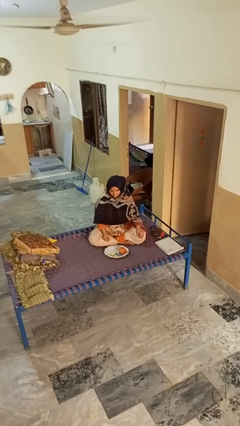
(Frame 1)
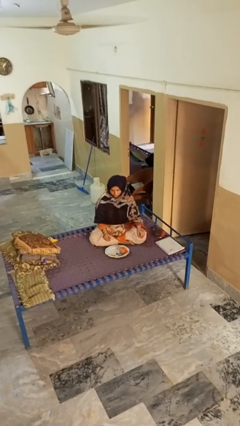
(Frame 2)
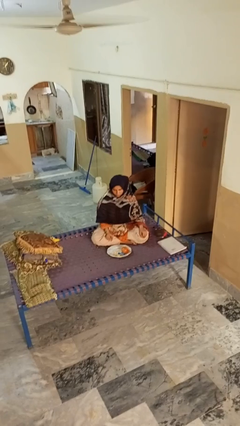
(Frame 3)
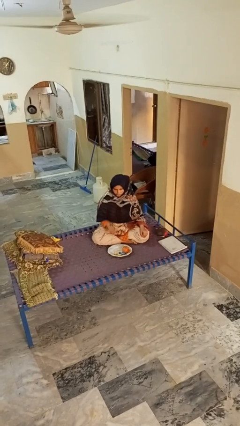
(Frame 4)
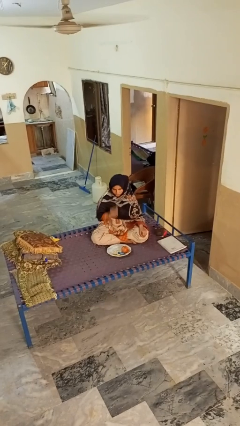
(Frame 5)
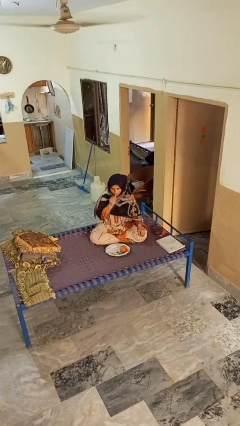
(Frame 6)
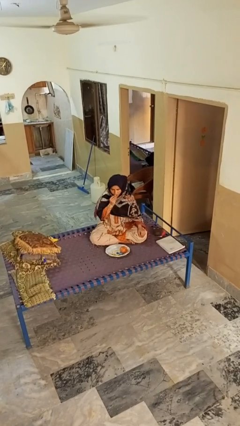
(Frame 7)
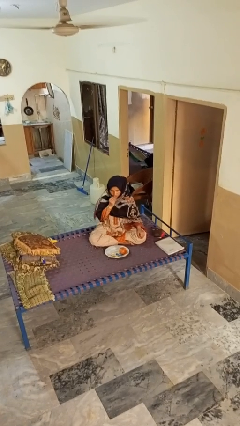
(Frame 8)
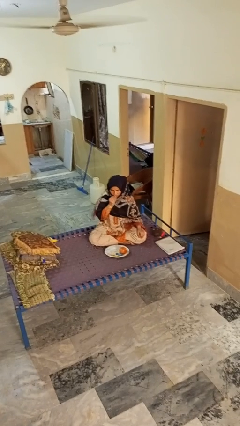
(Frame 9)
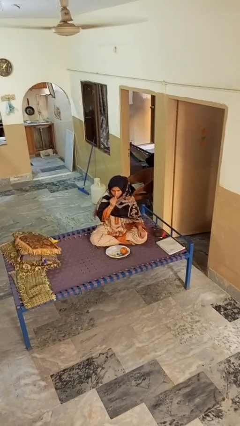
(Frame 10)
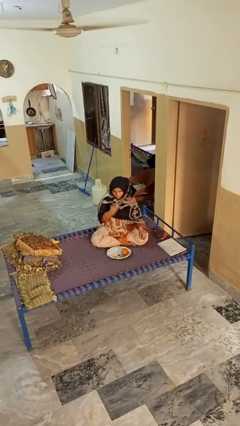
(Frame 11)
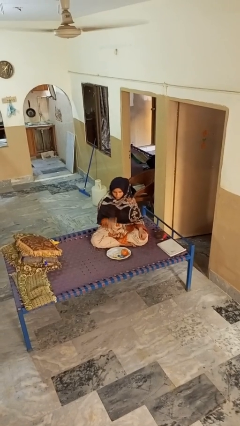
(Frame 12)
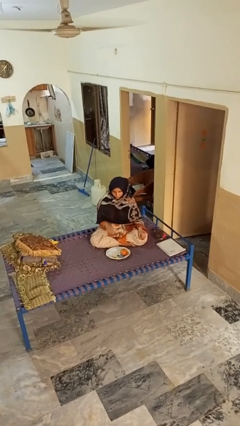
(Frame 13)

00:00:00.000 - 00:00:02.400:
person eats apple

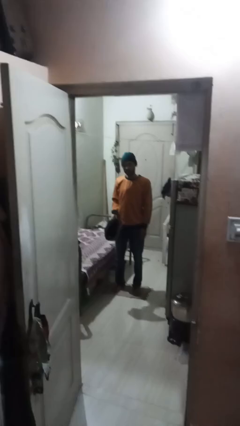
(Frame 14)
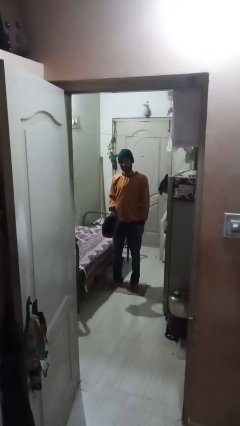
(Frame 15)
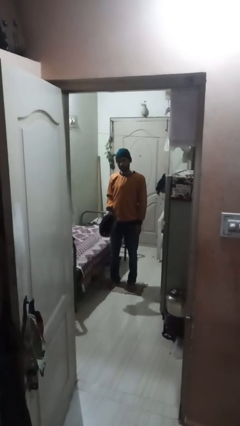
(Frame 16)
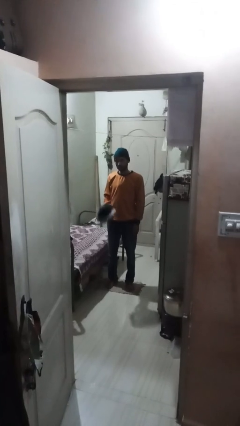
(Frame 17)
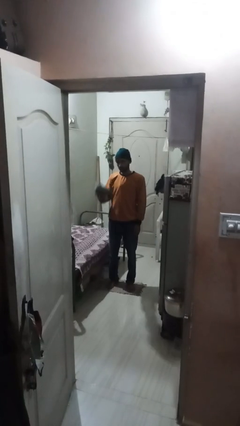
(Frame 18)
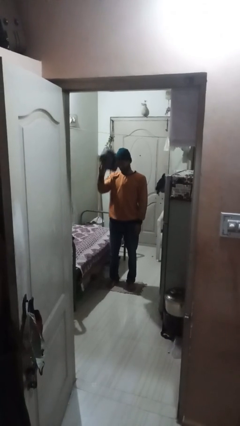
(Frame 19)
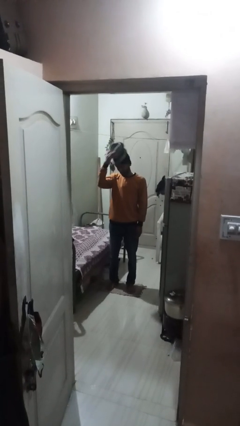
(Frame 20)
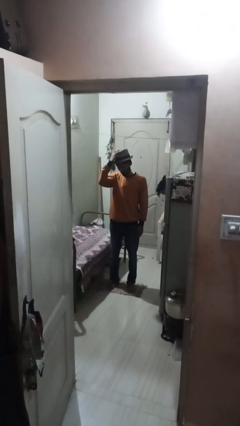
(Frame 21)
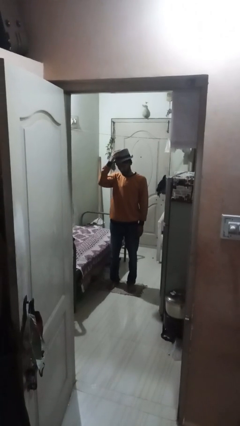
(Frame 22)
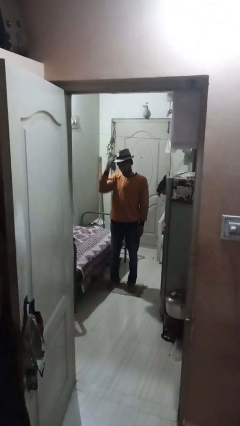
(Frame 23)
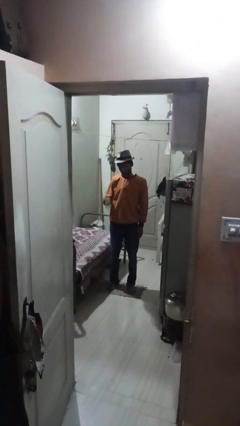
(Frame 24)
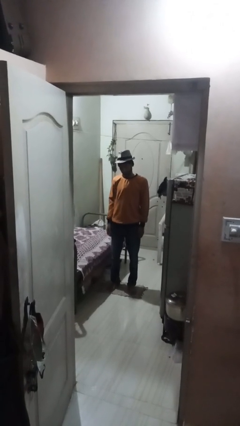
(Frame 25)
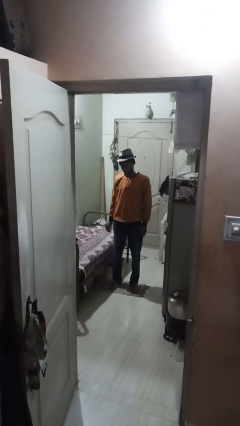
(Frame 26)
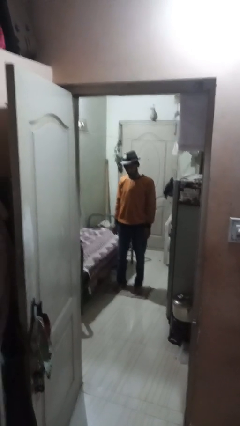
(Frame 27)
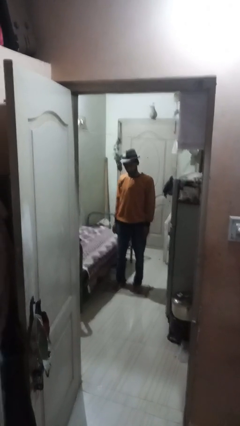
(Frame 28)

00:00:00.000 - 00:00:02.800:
person puts on hat

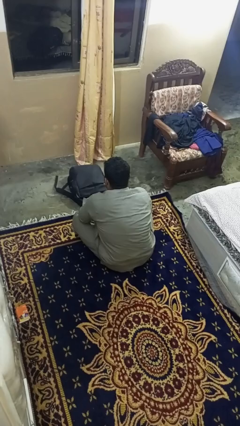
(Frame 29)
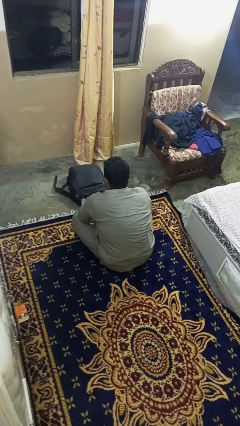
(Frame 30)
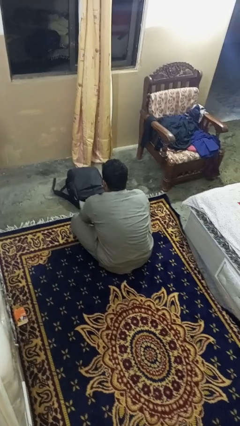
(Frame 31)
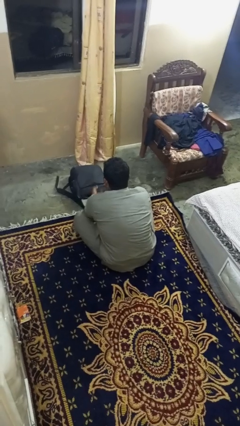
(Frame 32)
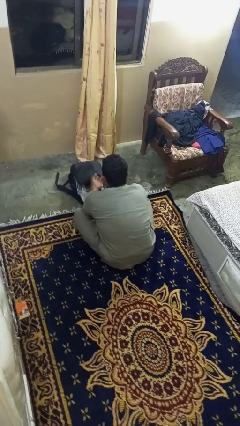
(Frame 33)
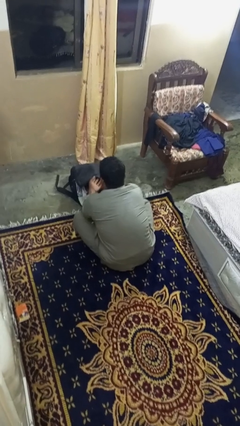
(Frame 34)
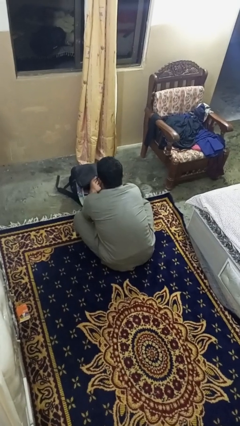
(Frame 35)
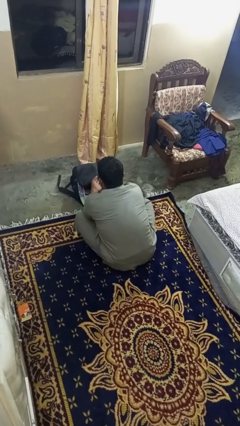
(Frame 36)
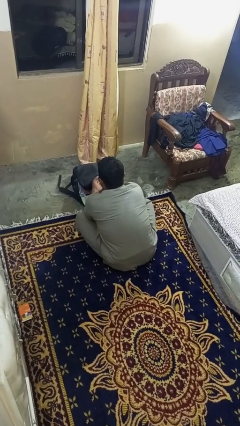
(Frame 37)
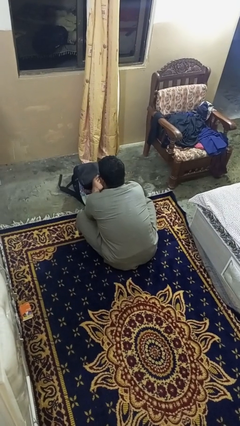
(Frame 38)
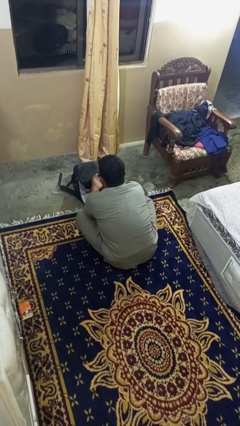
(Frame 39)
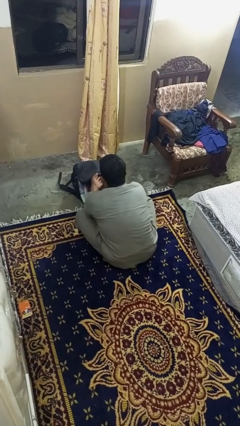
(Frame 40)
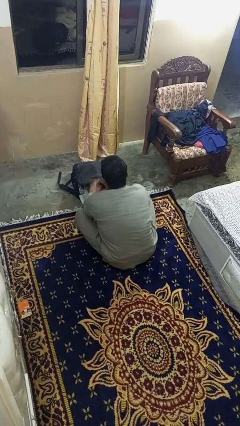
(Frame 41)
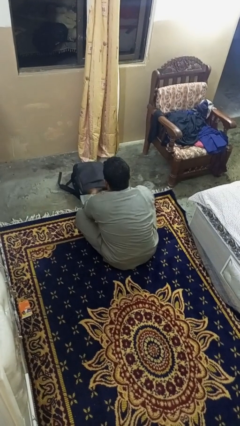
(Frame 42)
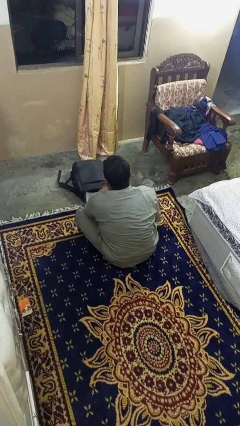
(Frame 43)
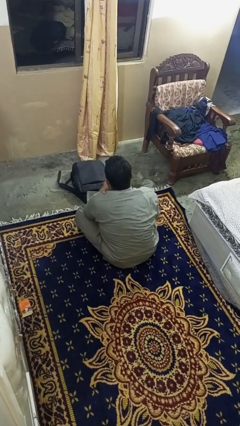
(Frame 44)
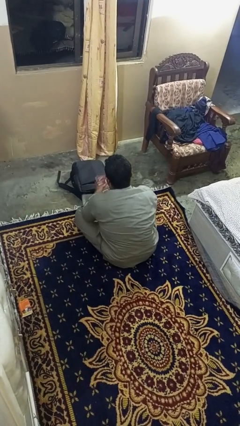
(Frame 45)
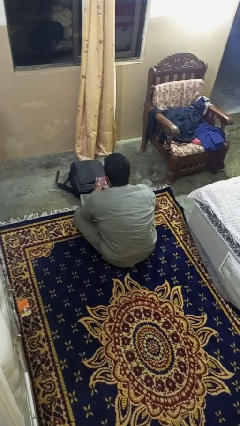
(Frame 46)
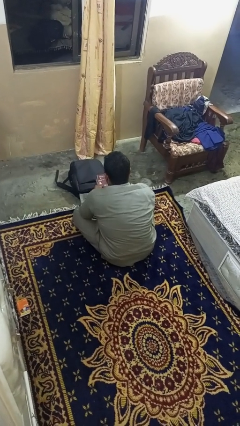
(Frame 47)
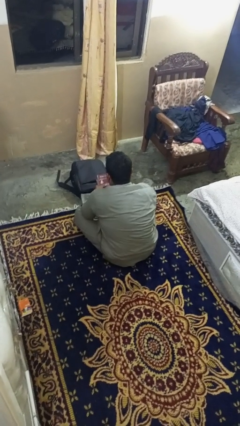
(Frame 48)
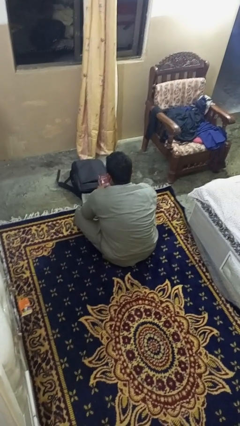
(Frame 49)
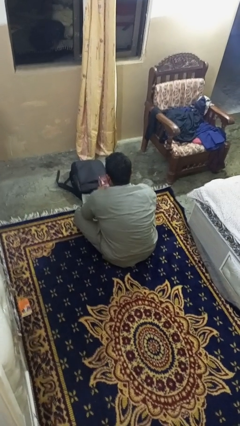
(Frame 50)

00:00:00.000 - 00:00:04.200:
person takes object from bag

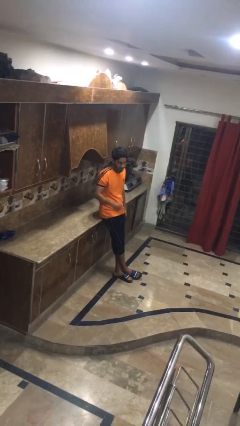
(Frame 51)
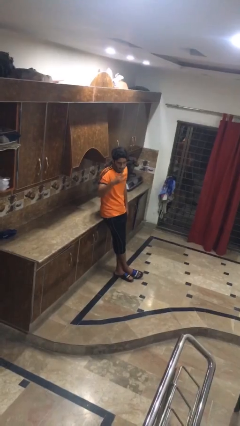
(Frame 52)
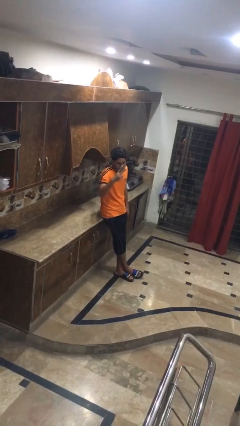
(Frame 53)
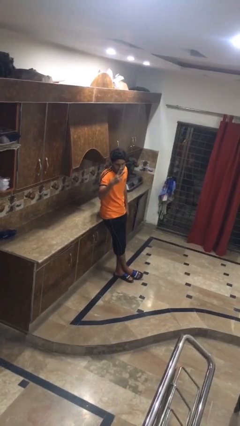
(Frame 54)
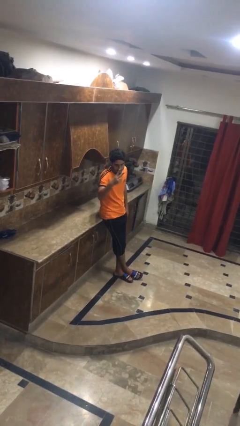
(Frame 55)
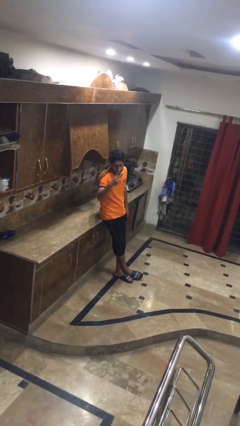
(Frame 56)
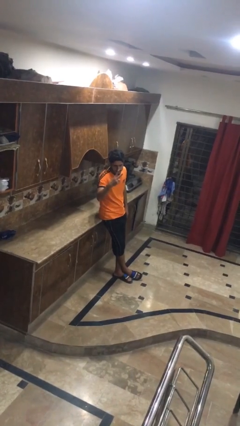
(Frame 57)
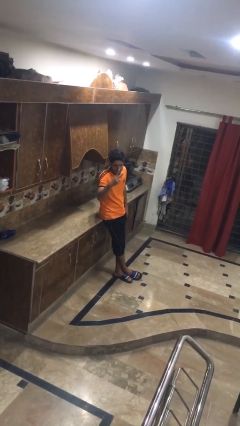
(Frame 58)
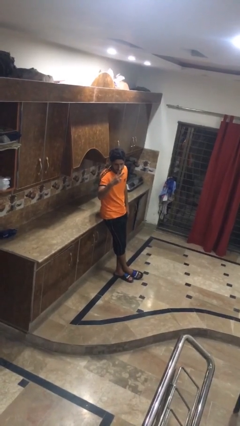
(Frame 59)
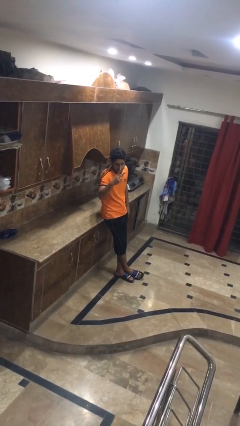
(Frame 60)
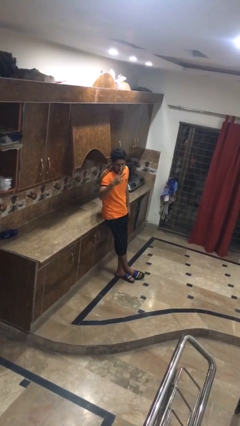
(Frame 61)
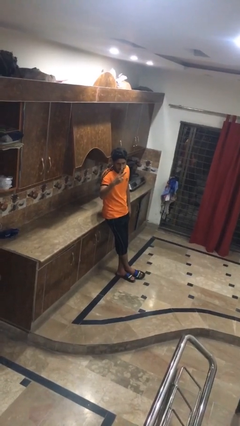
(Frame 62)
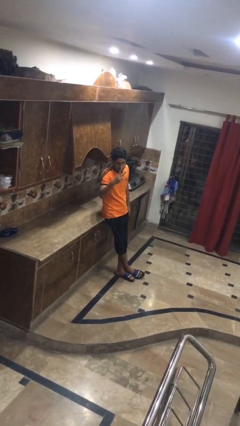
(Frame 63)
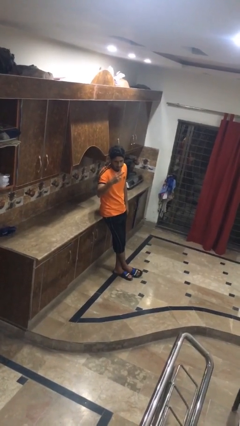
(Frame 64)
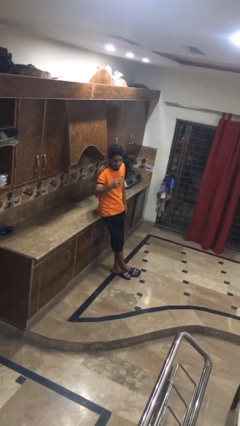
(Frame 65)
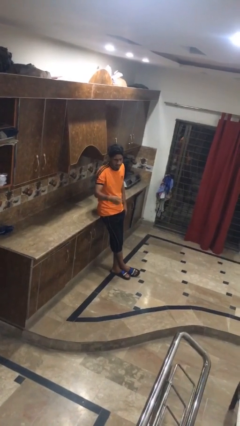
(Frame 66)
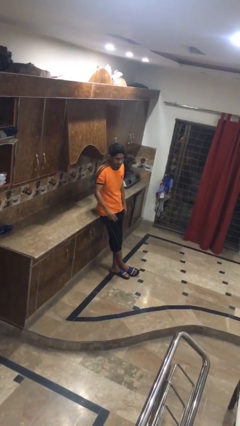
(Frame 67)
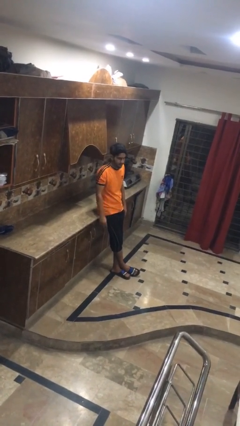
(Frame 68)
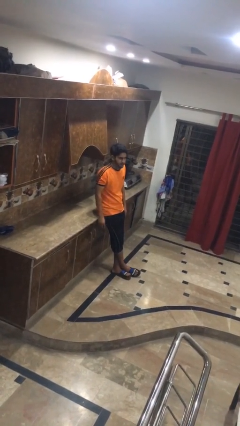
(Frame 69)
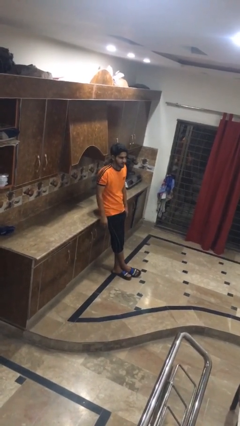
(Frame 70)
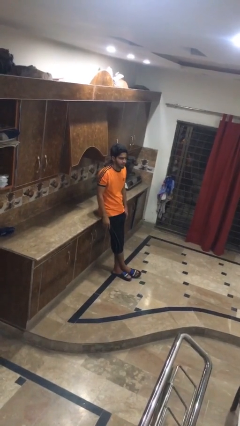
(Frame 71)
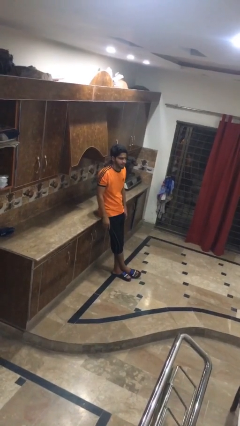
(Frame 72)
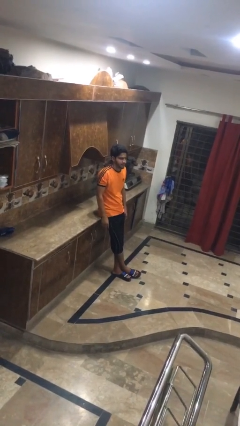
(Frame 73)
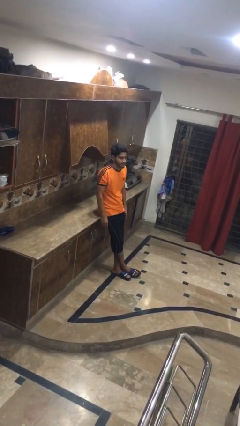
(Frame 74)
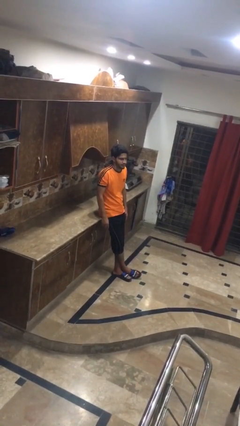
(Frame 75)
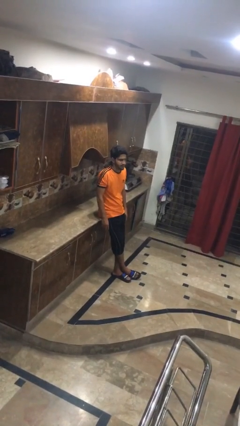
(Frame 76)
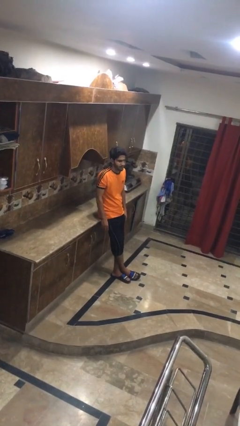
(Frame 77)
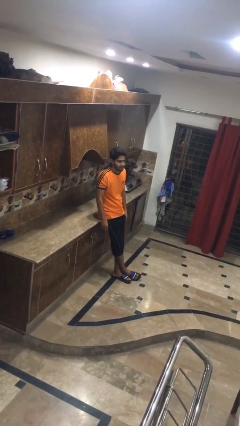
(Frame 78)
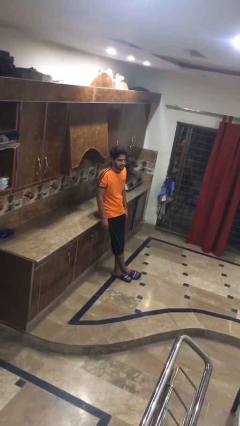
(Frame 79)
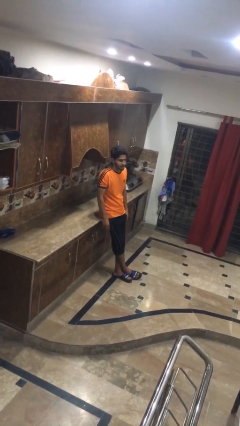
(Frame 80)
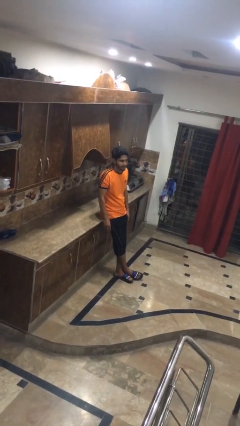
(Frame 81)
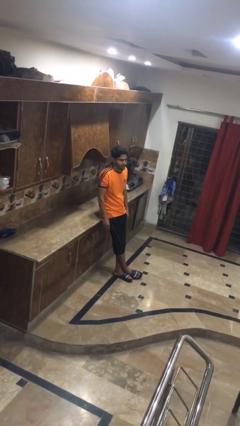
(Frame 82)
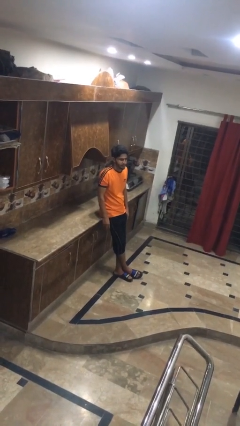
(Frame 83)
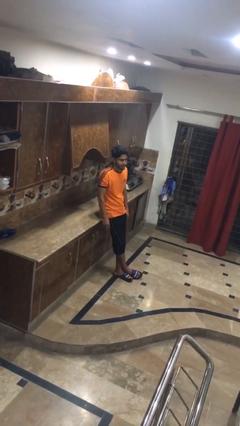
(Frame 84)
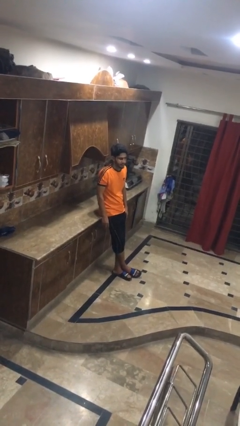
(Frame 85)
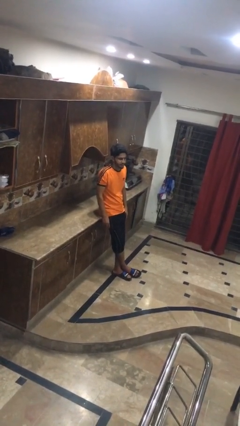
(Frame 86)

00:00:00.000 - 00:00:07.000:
person gestures peace

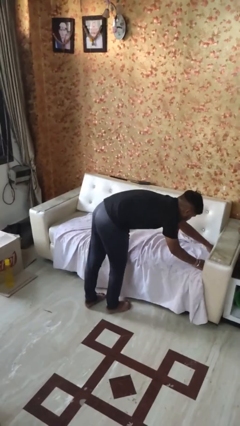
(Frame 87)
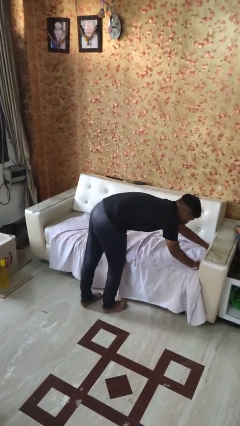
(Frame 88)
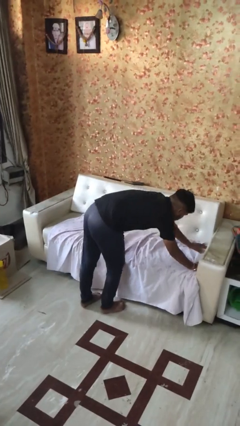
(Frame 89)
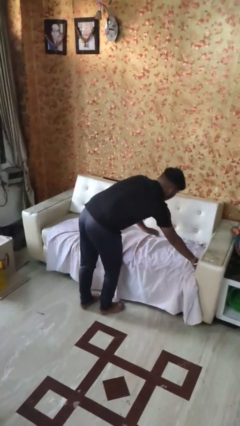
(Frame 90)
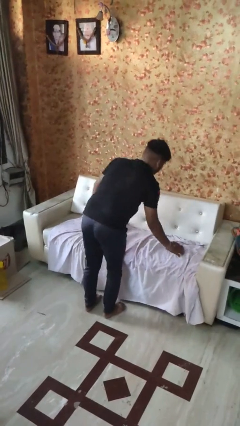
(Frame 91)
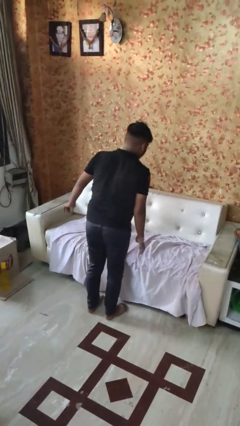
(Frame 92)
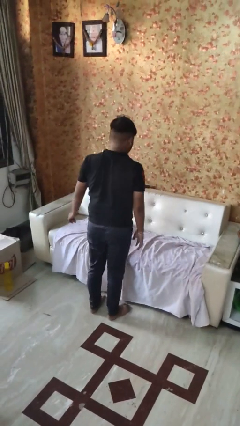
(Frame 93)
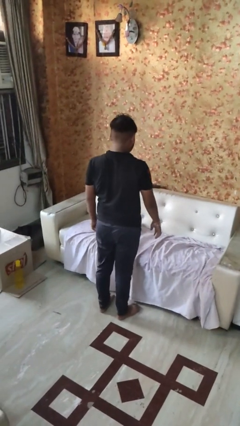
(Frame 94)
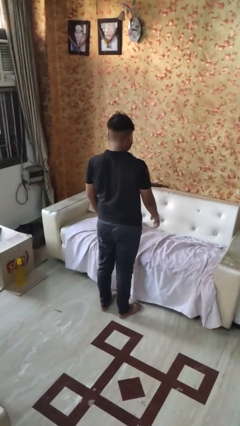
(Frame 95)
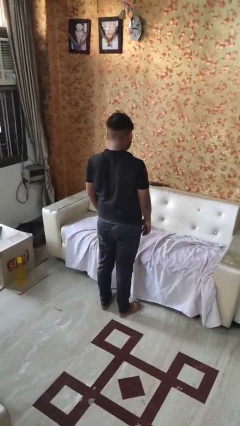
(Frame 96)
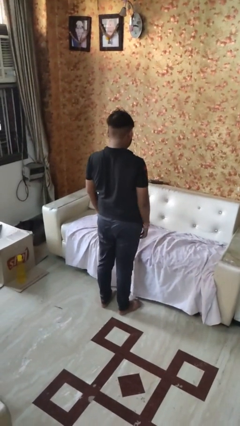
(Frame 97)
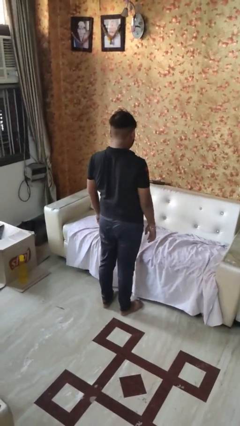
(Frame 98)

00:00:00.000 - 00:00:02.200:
person makes bed
